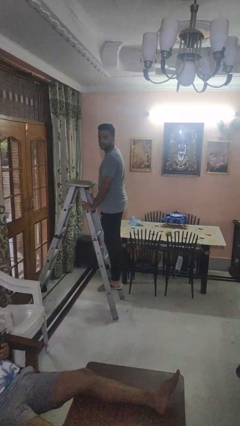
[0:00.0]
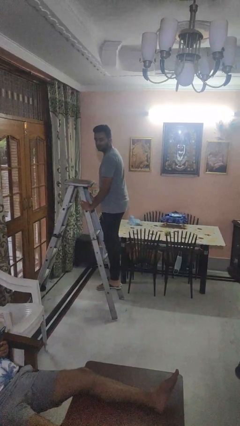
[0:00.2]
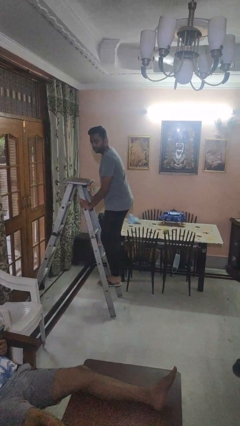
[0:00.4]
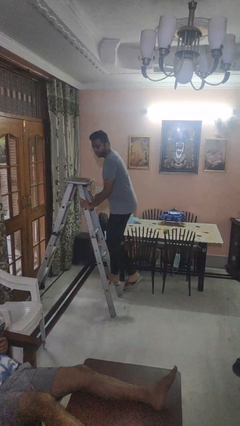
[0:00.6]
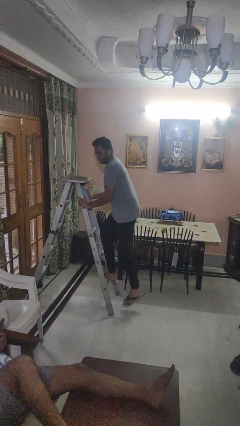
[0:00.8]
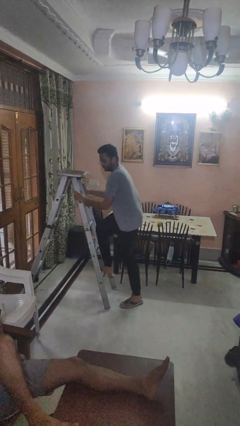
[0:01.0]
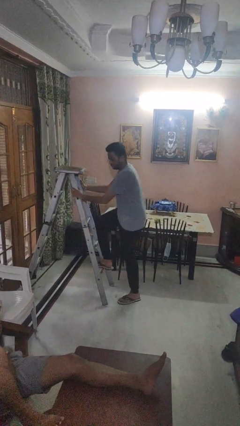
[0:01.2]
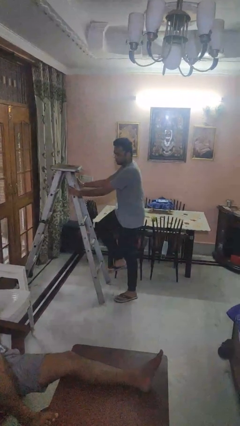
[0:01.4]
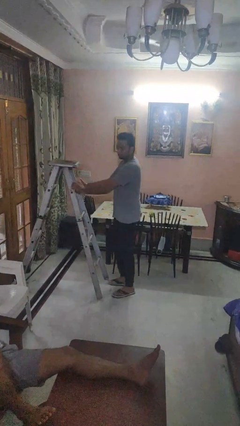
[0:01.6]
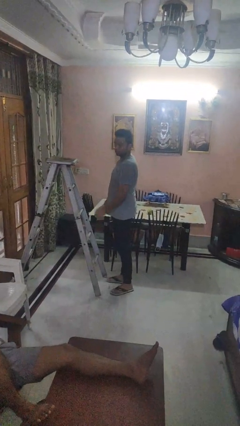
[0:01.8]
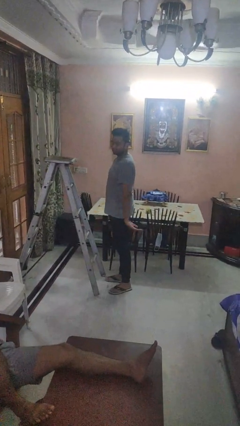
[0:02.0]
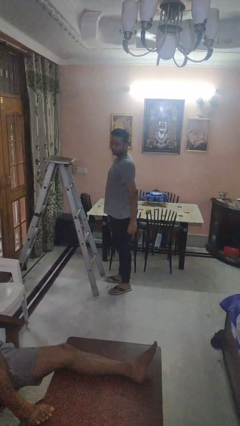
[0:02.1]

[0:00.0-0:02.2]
person climbs down ladder

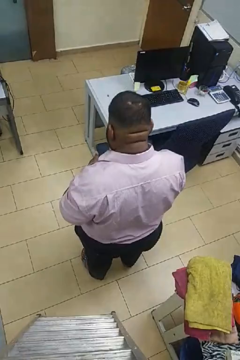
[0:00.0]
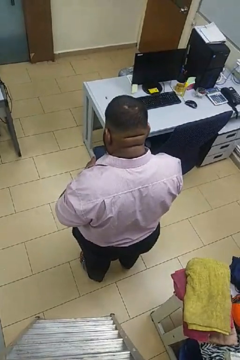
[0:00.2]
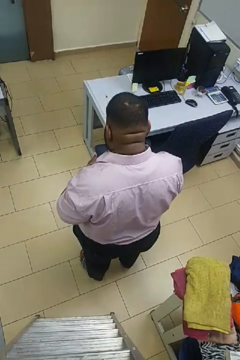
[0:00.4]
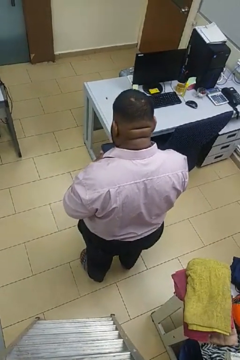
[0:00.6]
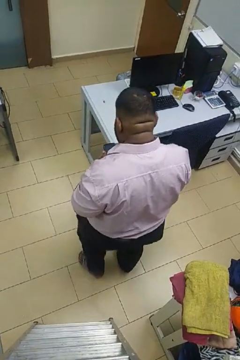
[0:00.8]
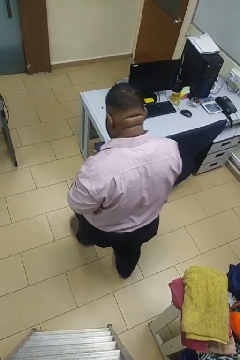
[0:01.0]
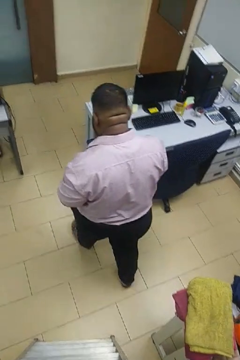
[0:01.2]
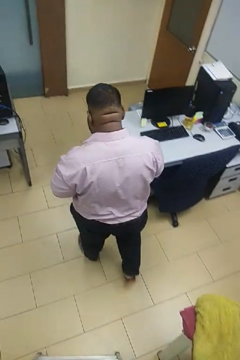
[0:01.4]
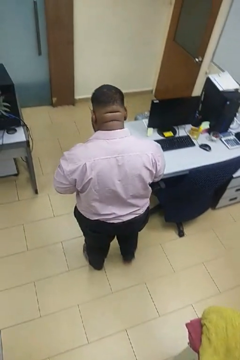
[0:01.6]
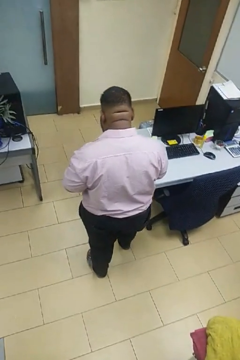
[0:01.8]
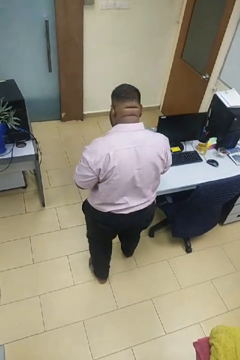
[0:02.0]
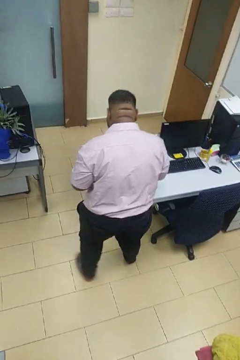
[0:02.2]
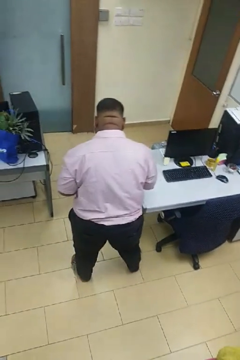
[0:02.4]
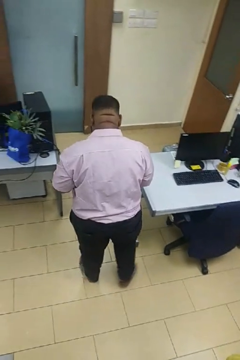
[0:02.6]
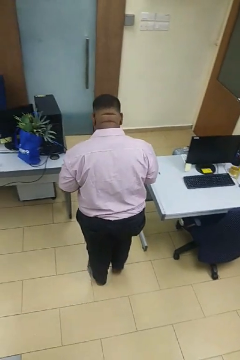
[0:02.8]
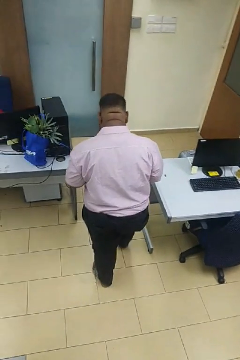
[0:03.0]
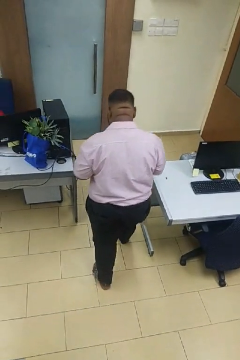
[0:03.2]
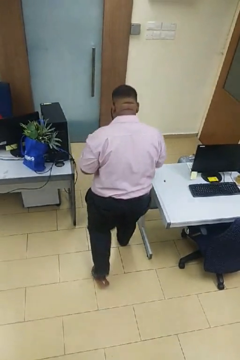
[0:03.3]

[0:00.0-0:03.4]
person bumps into table

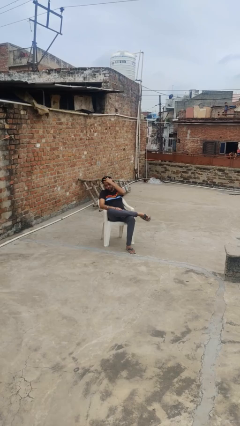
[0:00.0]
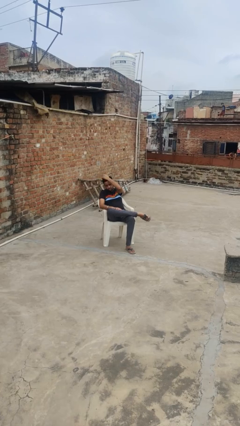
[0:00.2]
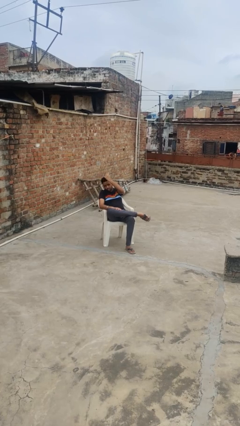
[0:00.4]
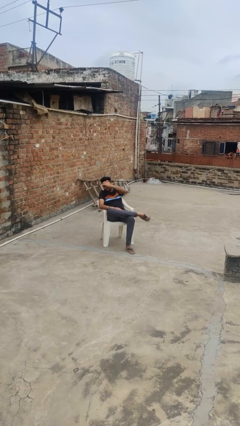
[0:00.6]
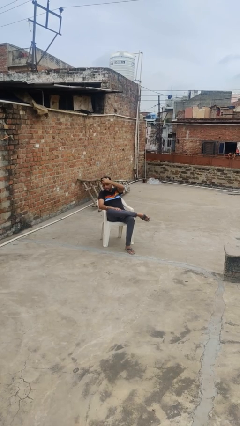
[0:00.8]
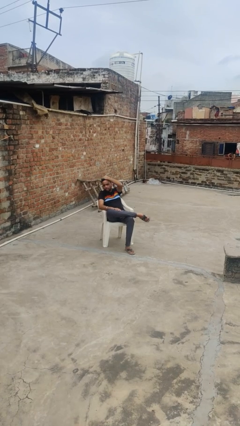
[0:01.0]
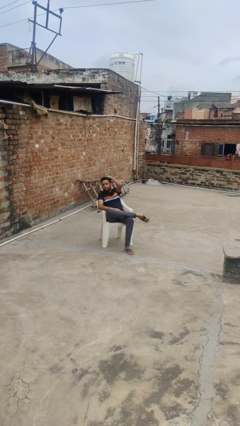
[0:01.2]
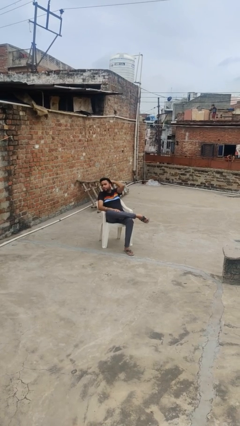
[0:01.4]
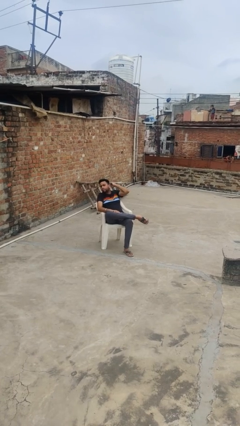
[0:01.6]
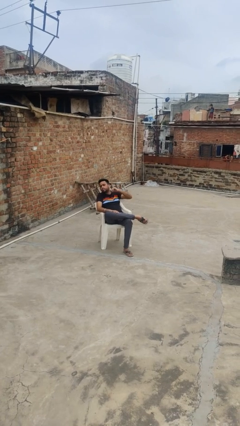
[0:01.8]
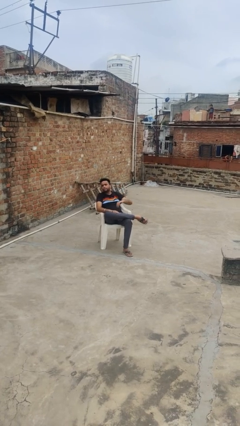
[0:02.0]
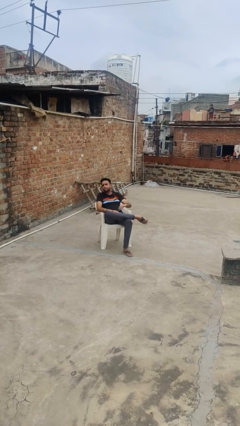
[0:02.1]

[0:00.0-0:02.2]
person strokes hair

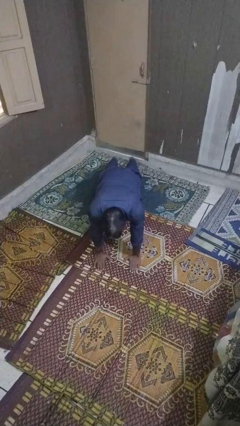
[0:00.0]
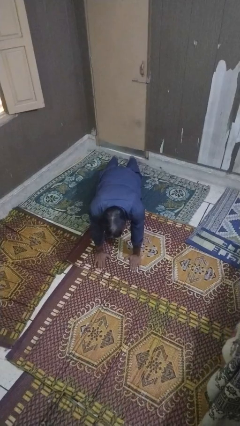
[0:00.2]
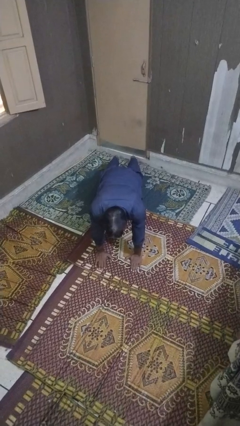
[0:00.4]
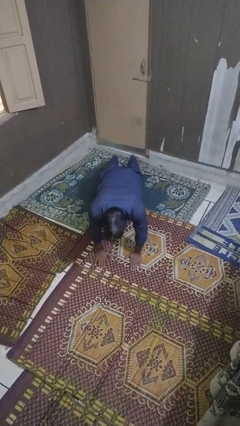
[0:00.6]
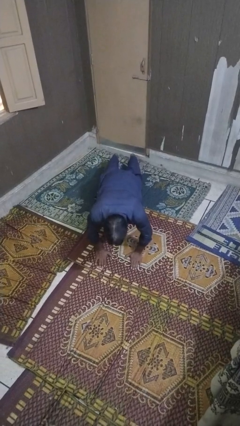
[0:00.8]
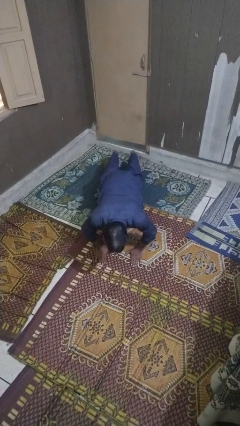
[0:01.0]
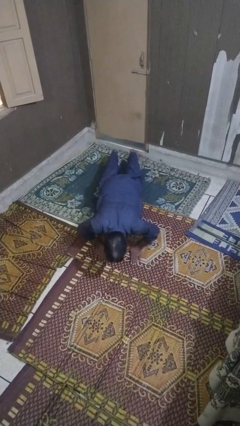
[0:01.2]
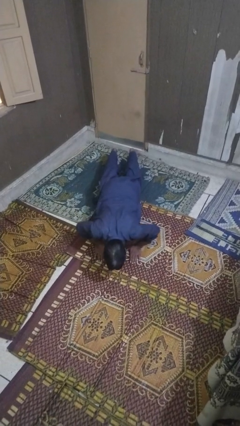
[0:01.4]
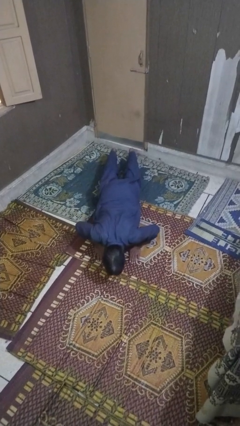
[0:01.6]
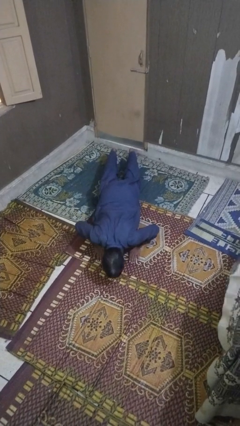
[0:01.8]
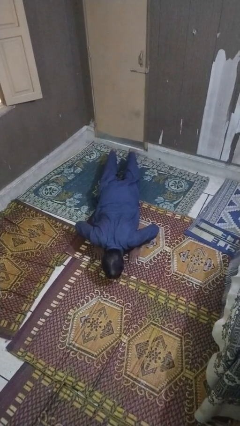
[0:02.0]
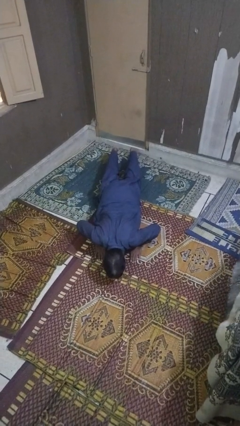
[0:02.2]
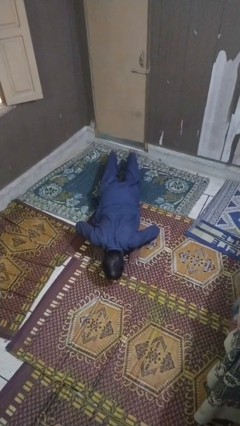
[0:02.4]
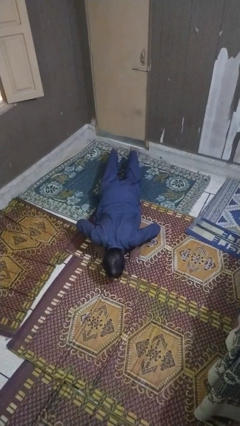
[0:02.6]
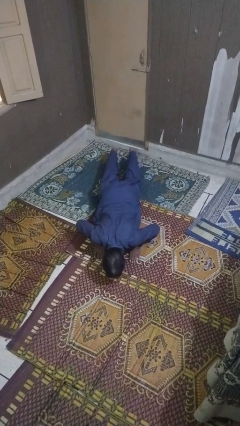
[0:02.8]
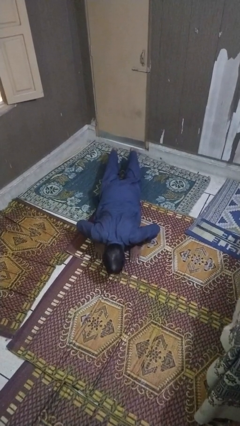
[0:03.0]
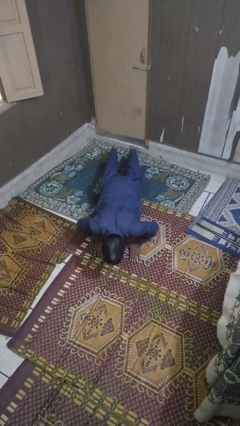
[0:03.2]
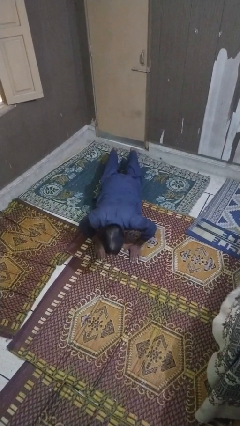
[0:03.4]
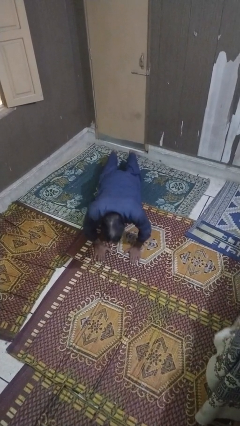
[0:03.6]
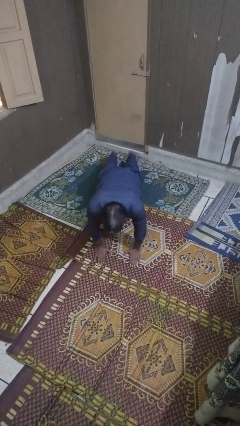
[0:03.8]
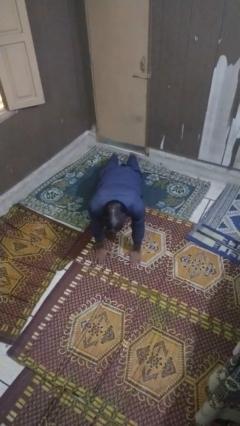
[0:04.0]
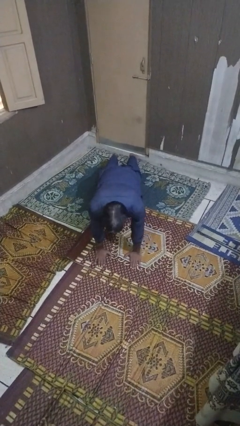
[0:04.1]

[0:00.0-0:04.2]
person exercises with pushup

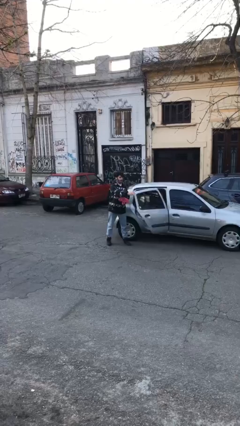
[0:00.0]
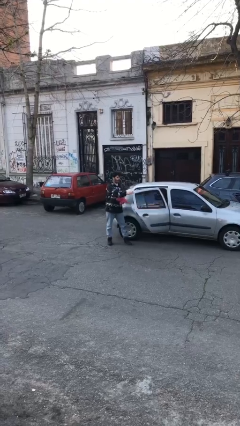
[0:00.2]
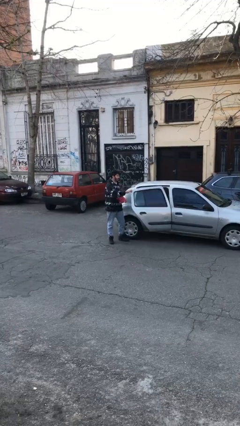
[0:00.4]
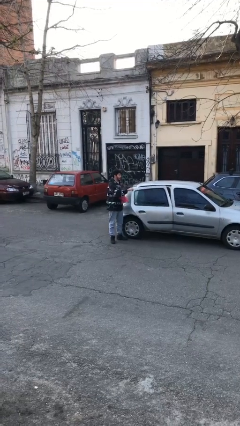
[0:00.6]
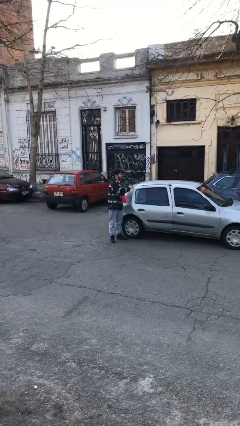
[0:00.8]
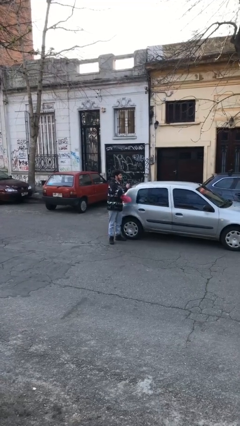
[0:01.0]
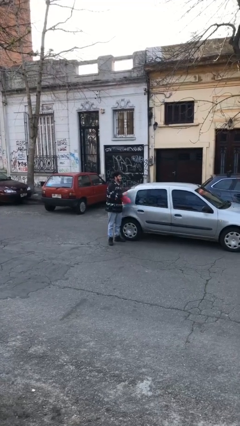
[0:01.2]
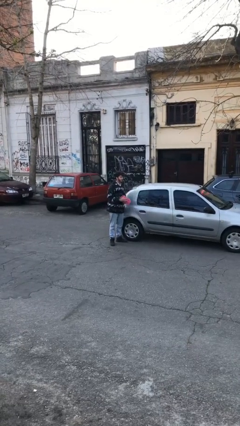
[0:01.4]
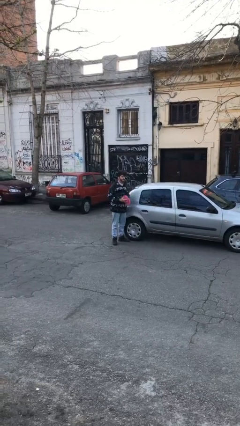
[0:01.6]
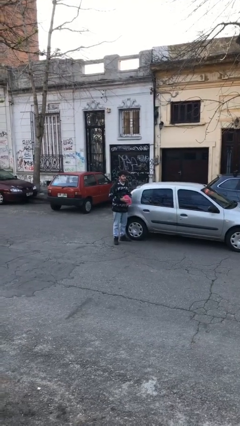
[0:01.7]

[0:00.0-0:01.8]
person closes car door

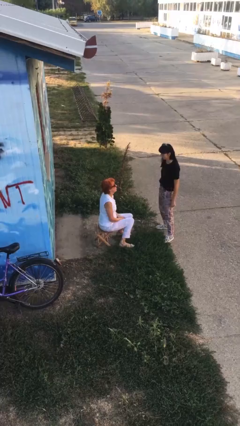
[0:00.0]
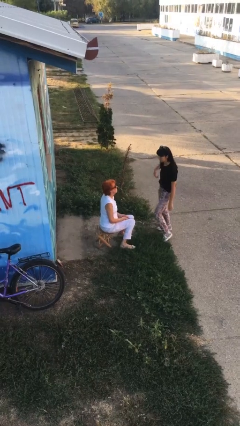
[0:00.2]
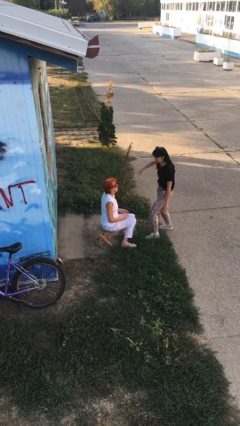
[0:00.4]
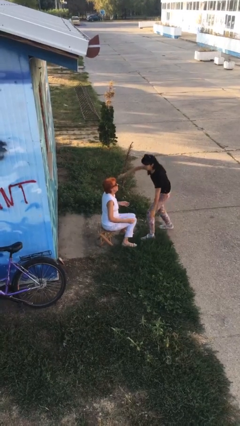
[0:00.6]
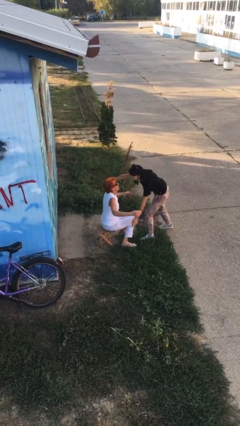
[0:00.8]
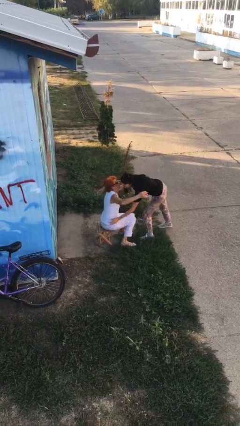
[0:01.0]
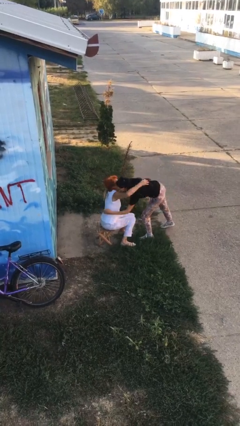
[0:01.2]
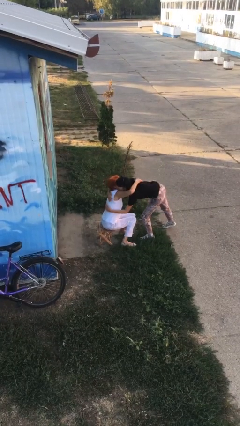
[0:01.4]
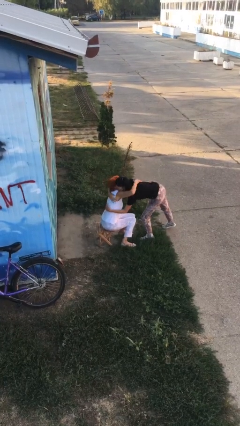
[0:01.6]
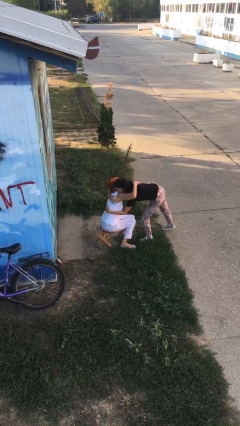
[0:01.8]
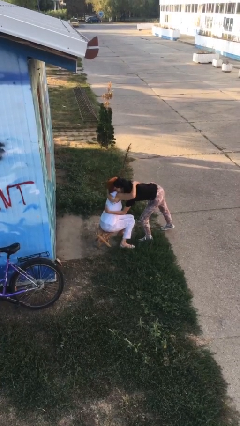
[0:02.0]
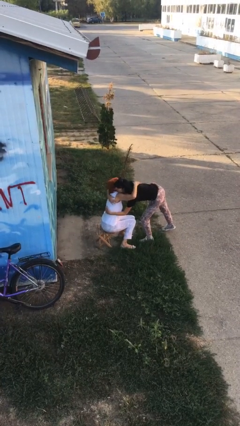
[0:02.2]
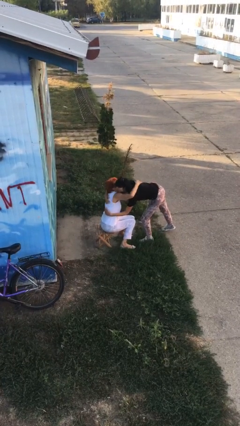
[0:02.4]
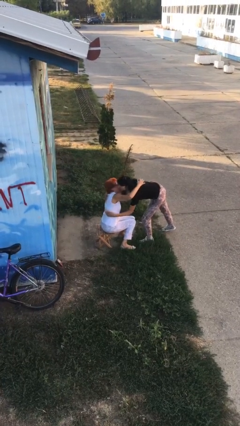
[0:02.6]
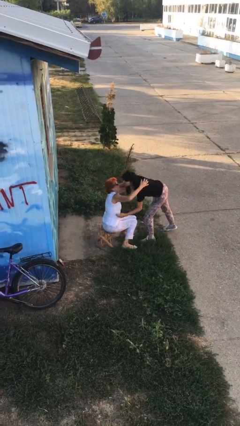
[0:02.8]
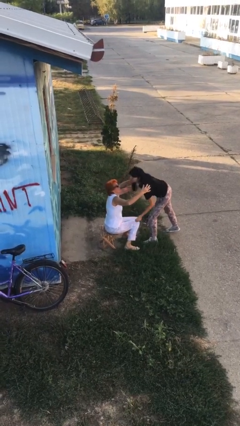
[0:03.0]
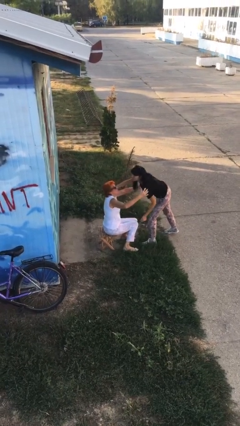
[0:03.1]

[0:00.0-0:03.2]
person embraces person

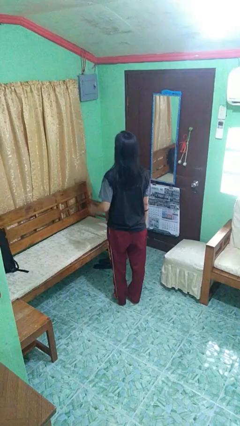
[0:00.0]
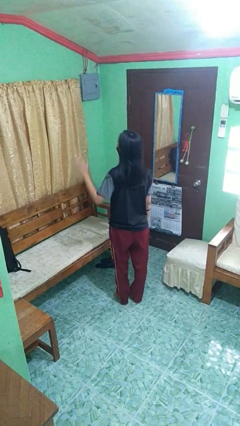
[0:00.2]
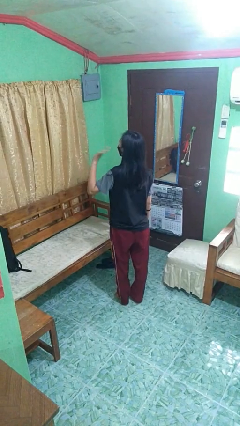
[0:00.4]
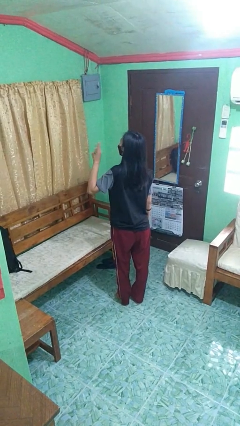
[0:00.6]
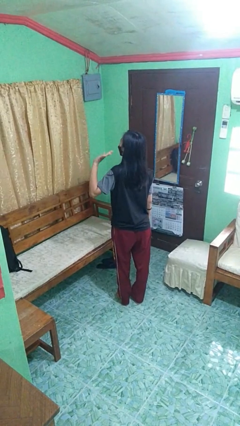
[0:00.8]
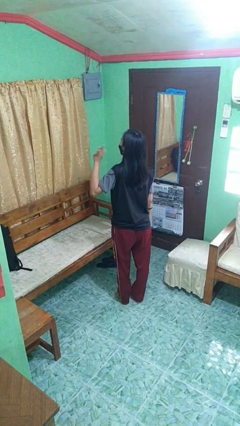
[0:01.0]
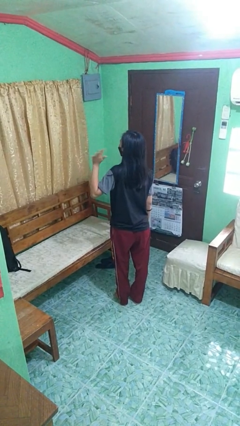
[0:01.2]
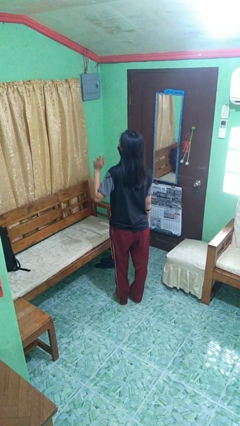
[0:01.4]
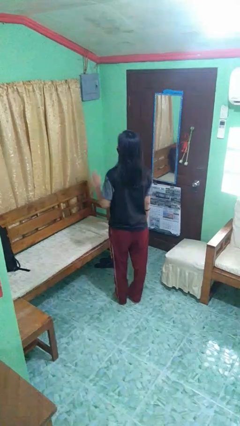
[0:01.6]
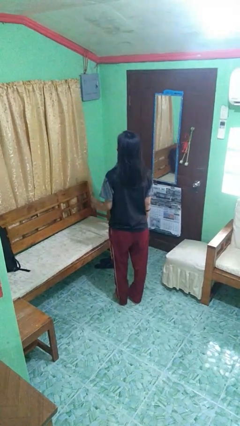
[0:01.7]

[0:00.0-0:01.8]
person waves at person
